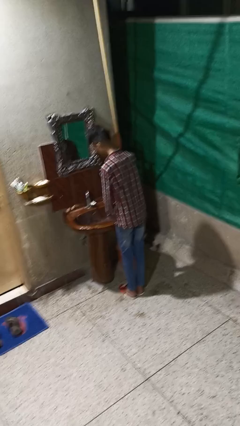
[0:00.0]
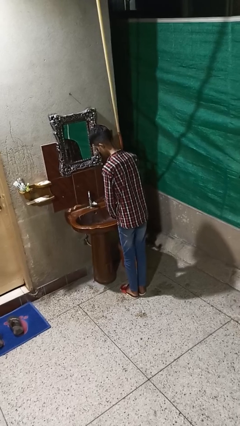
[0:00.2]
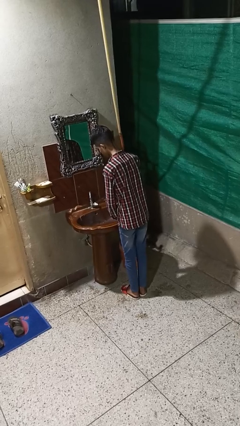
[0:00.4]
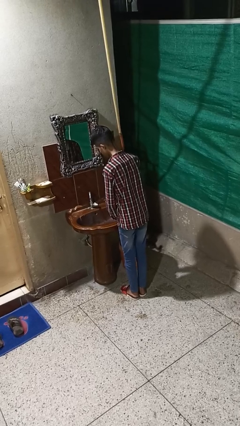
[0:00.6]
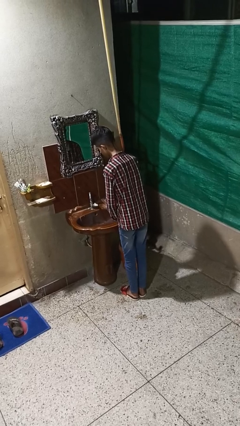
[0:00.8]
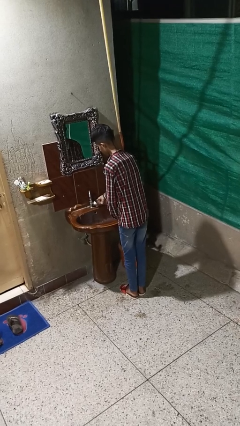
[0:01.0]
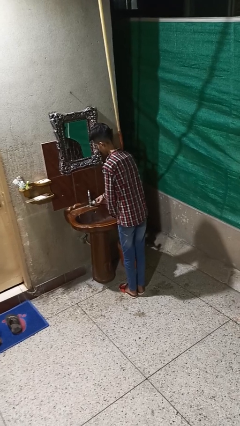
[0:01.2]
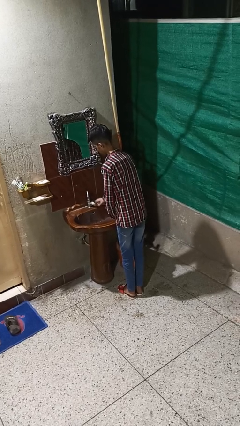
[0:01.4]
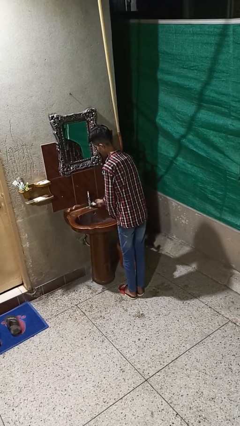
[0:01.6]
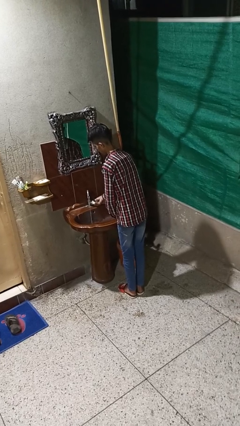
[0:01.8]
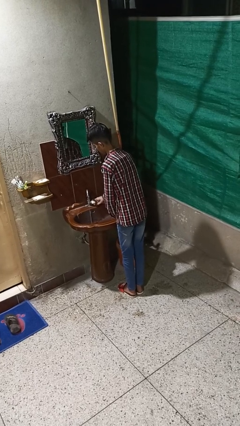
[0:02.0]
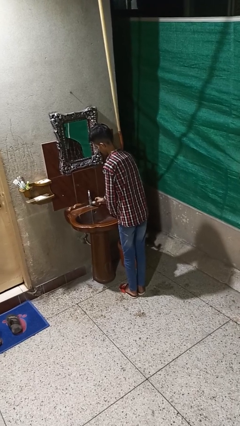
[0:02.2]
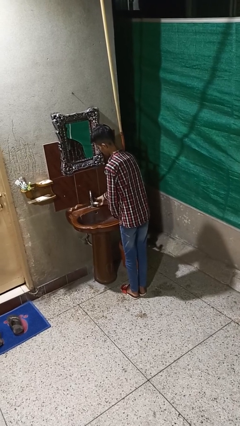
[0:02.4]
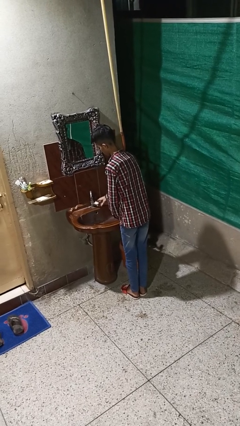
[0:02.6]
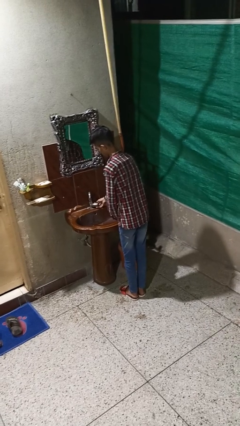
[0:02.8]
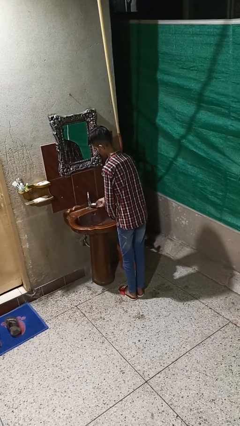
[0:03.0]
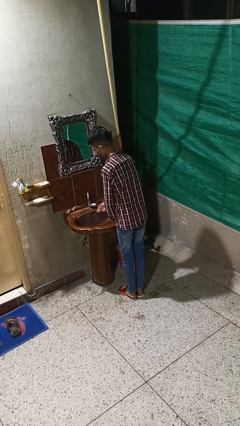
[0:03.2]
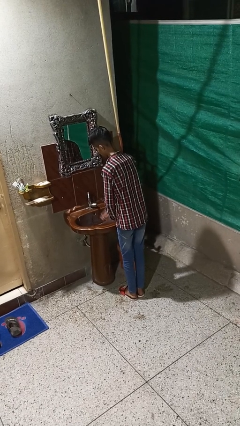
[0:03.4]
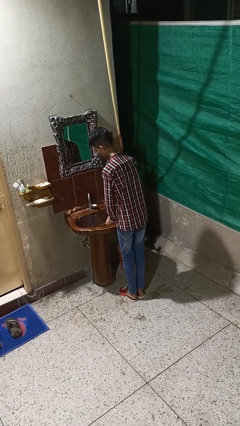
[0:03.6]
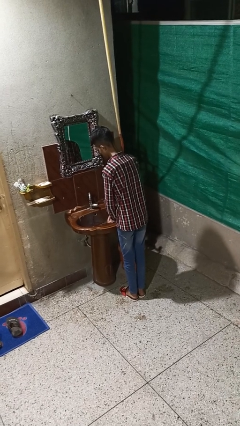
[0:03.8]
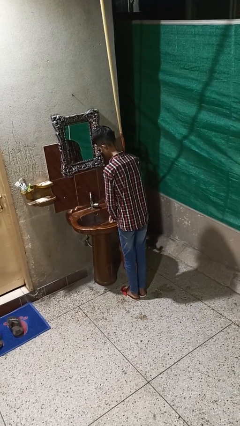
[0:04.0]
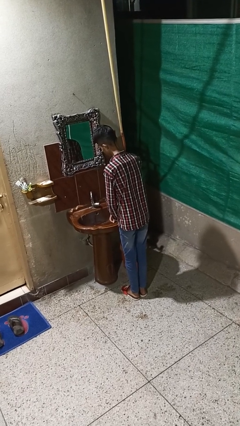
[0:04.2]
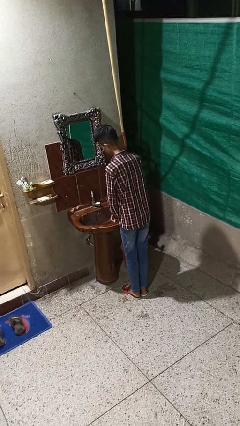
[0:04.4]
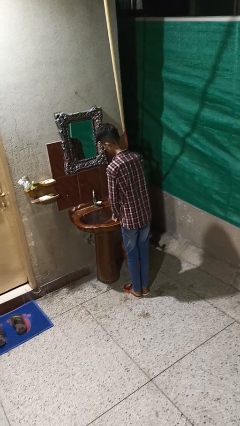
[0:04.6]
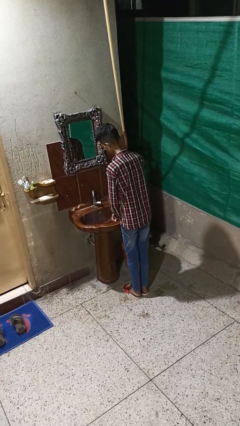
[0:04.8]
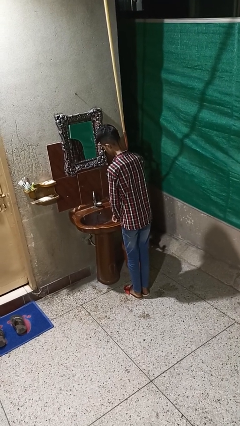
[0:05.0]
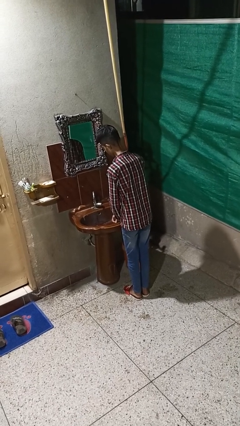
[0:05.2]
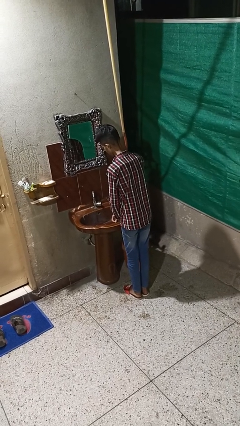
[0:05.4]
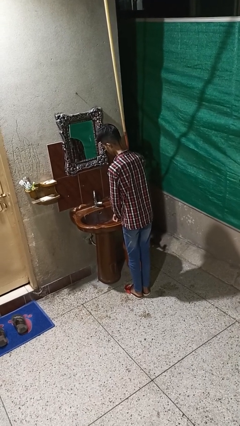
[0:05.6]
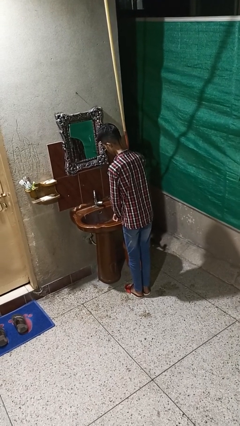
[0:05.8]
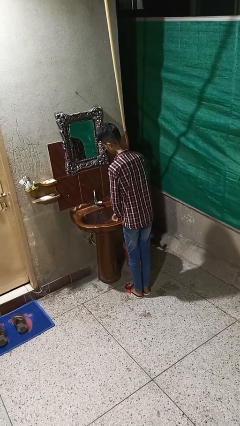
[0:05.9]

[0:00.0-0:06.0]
person turns on faucet

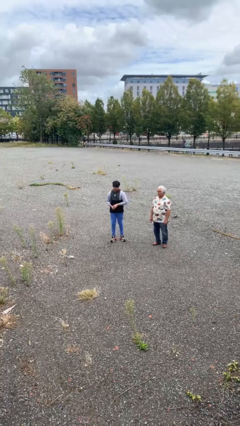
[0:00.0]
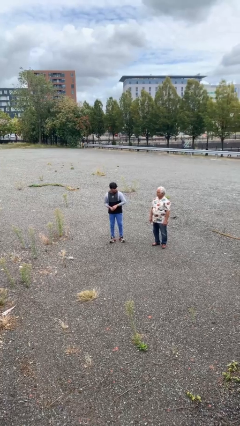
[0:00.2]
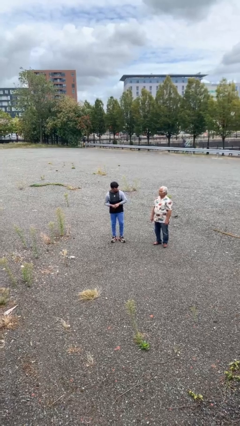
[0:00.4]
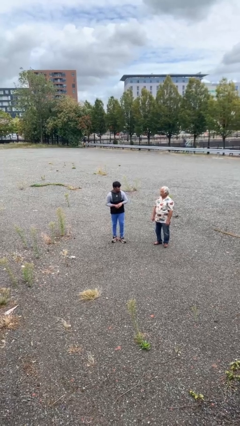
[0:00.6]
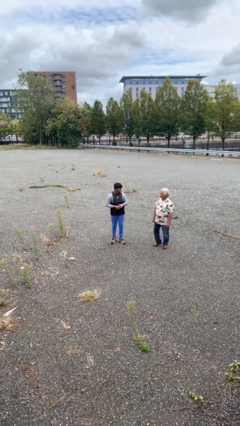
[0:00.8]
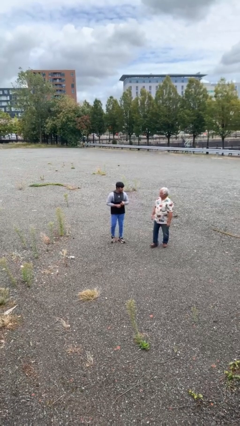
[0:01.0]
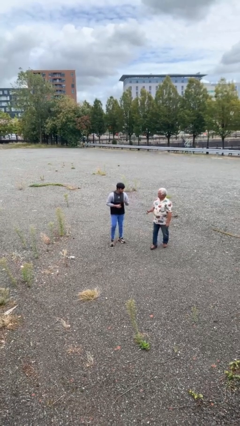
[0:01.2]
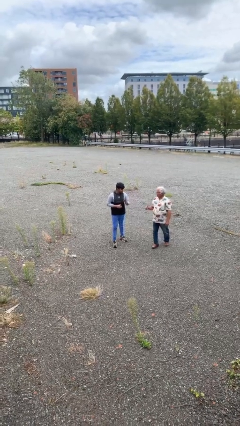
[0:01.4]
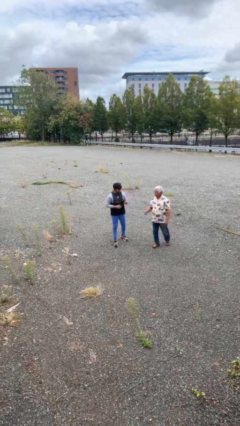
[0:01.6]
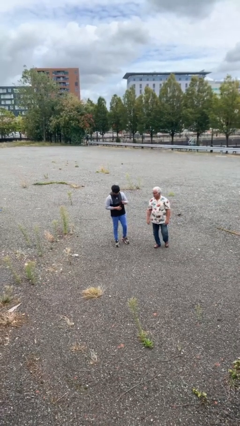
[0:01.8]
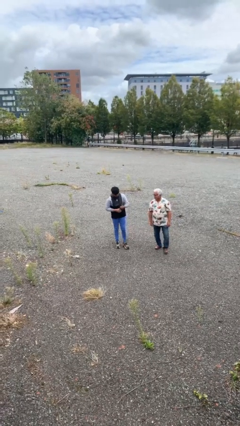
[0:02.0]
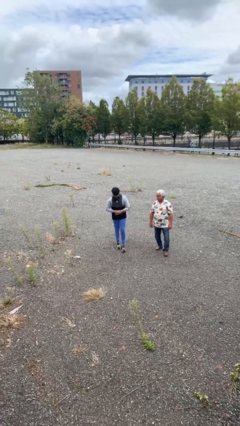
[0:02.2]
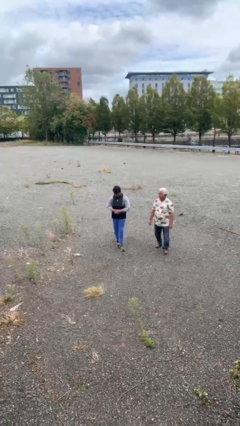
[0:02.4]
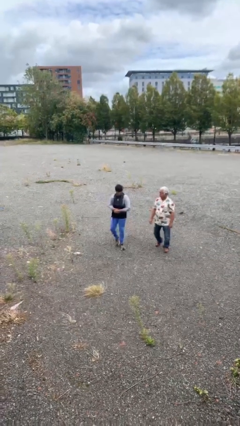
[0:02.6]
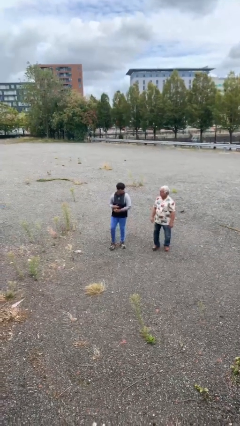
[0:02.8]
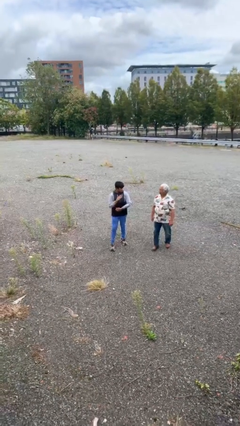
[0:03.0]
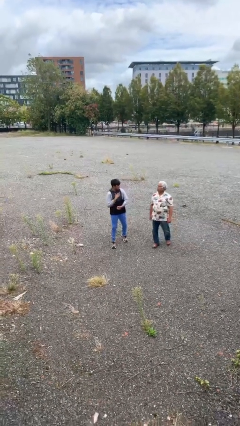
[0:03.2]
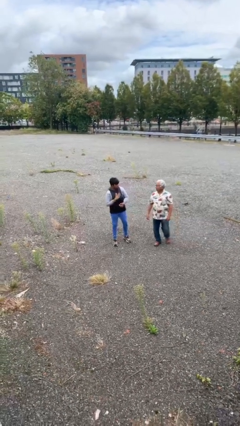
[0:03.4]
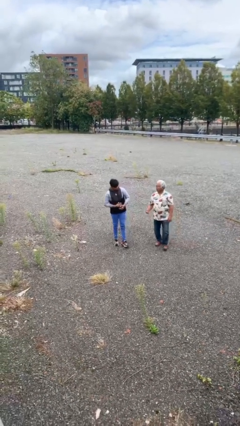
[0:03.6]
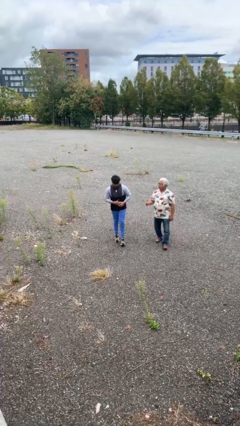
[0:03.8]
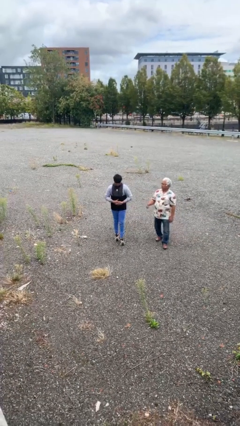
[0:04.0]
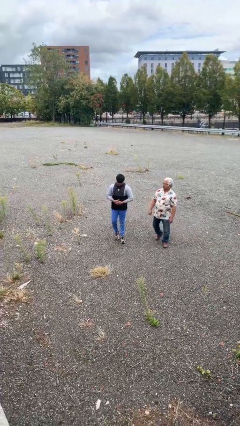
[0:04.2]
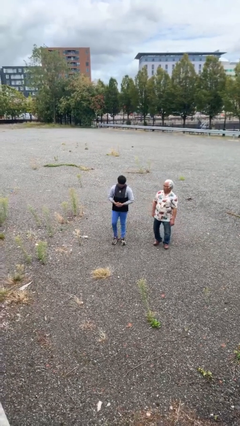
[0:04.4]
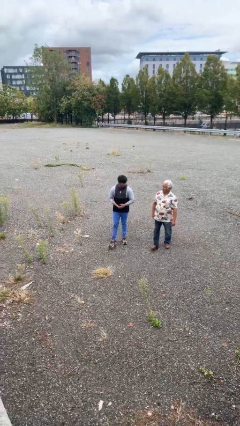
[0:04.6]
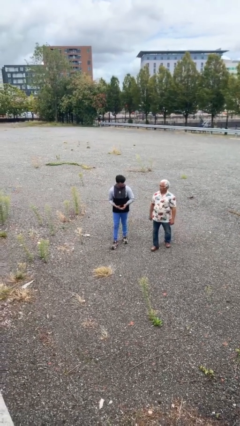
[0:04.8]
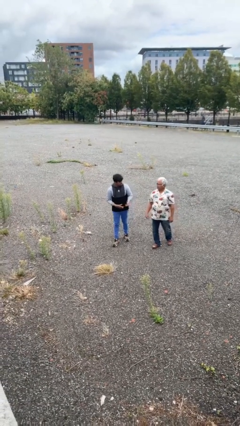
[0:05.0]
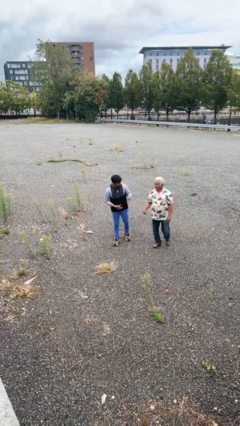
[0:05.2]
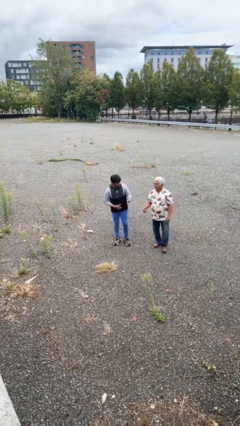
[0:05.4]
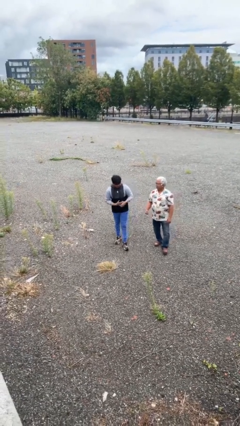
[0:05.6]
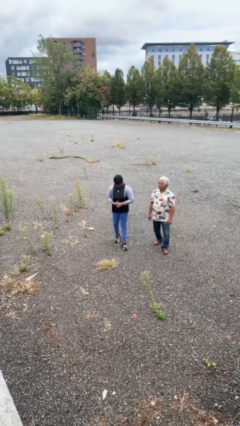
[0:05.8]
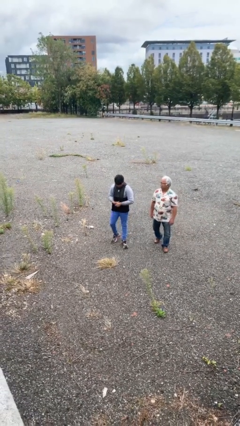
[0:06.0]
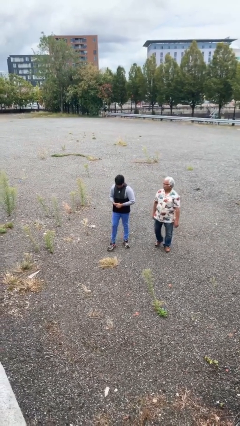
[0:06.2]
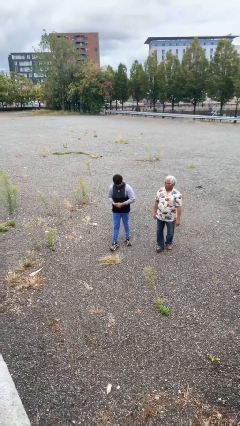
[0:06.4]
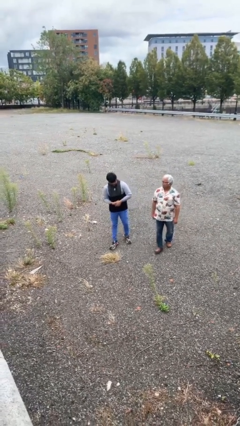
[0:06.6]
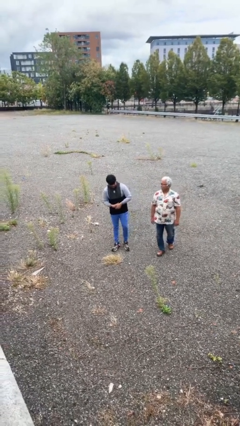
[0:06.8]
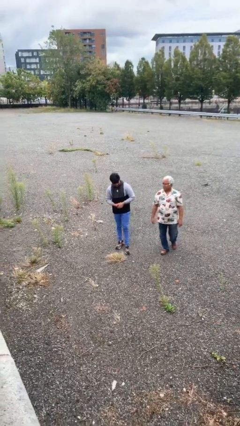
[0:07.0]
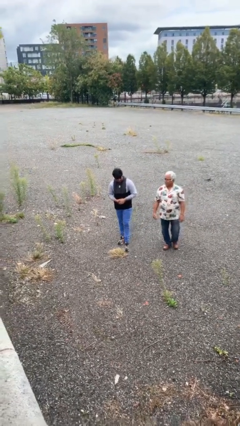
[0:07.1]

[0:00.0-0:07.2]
person talks to person

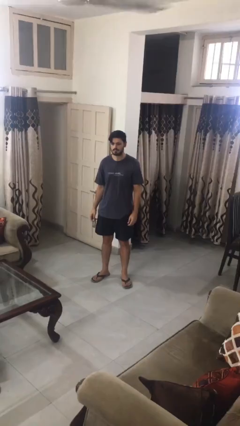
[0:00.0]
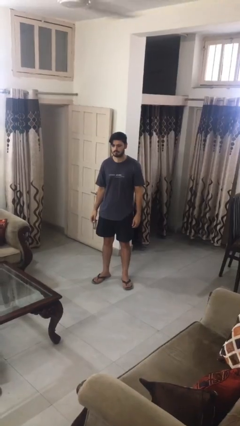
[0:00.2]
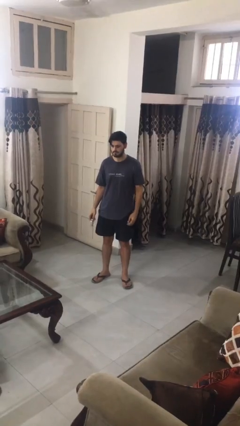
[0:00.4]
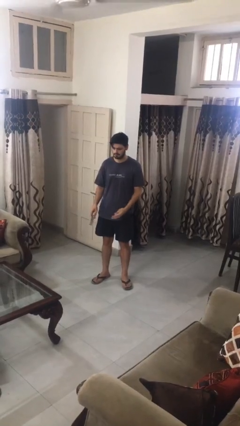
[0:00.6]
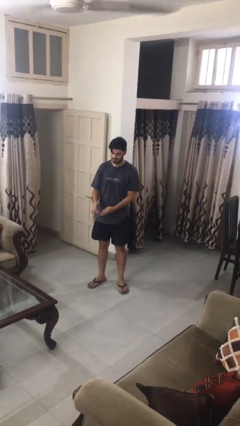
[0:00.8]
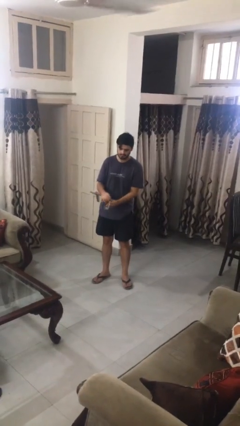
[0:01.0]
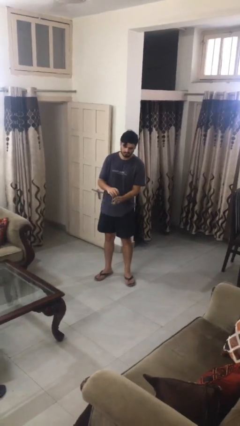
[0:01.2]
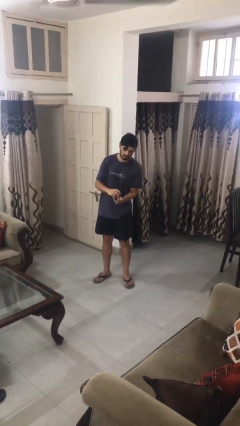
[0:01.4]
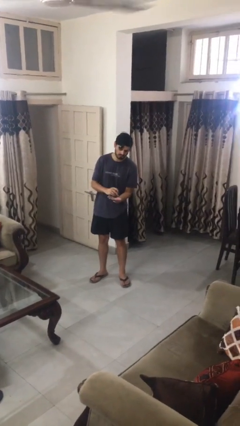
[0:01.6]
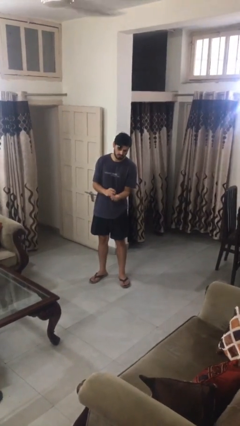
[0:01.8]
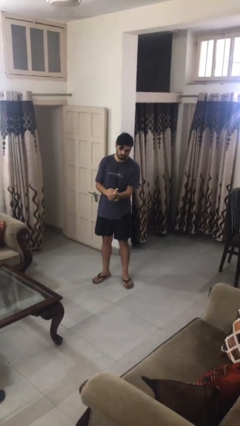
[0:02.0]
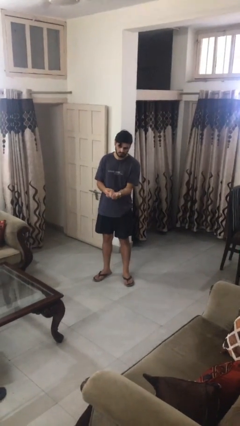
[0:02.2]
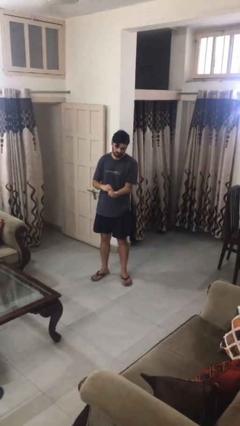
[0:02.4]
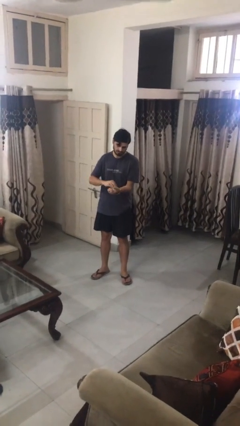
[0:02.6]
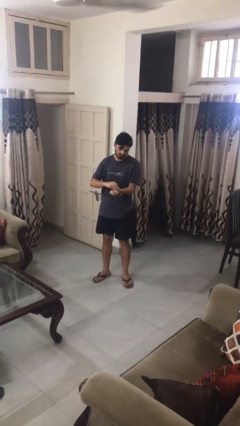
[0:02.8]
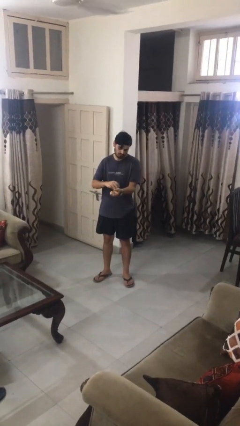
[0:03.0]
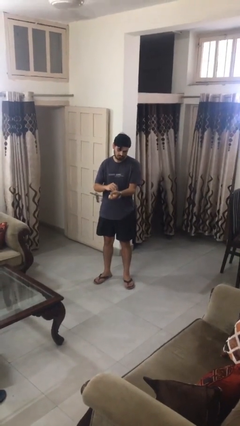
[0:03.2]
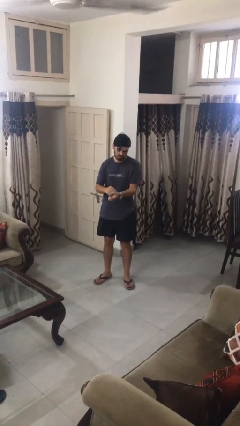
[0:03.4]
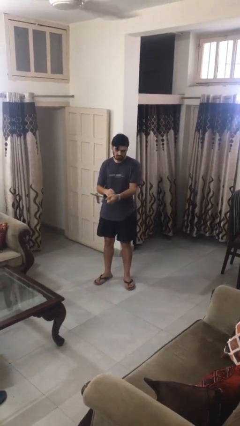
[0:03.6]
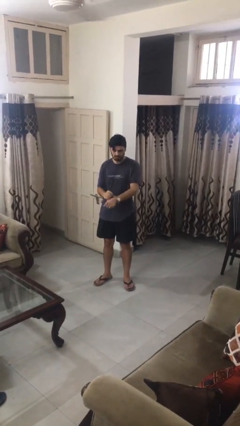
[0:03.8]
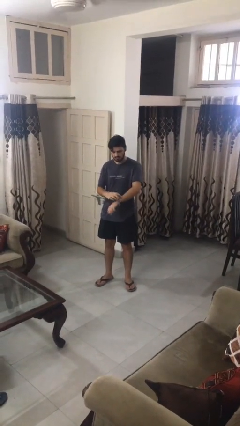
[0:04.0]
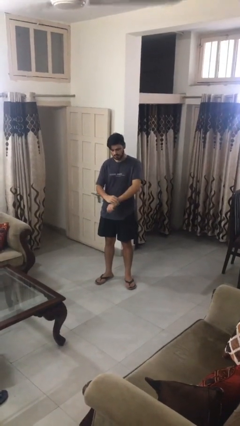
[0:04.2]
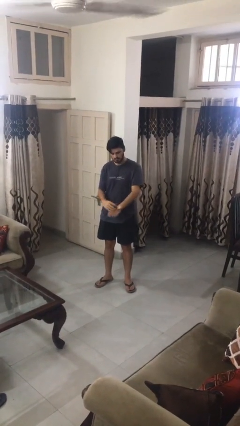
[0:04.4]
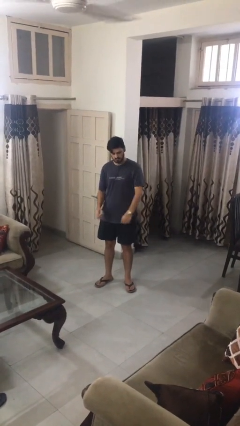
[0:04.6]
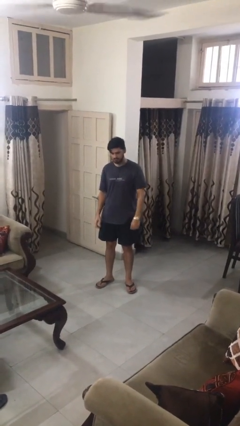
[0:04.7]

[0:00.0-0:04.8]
person puts on wristwatch

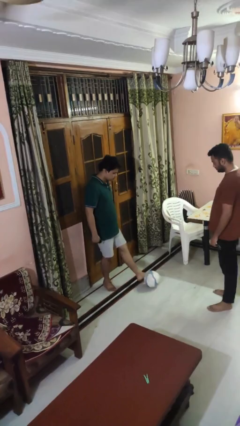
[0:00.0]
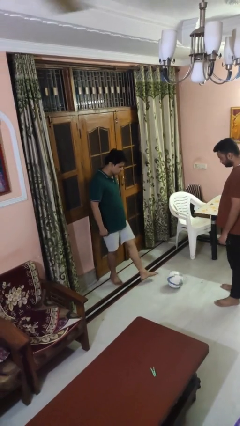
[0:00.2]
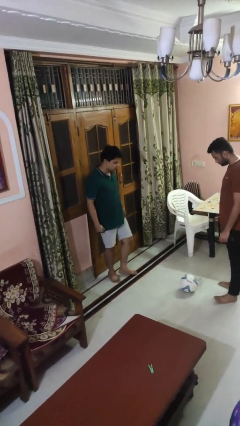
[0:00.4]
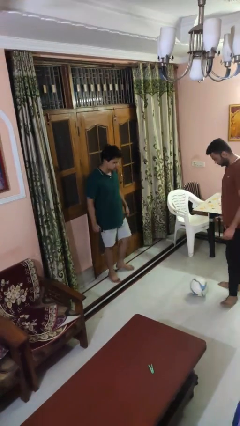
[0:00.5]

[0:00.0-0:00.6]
person kicks object to person
